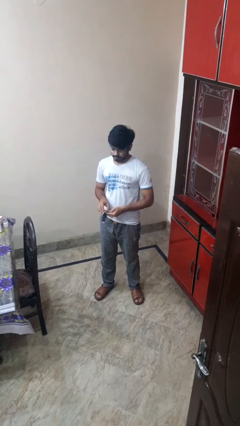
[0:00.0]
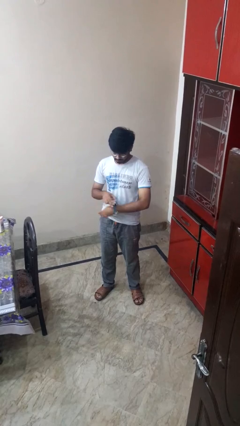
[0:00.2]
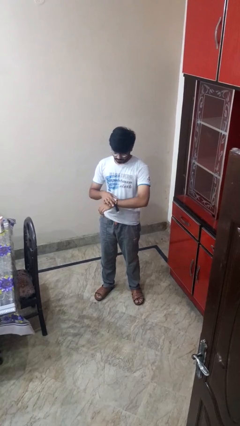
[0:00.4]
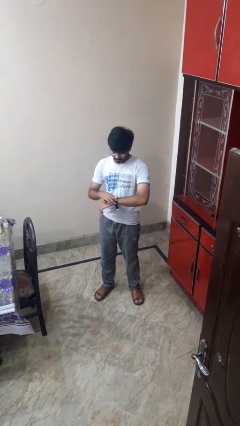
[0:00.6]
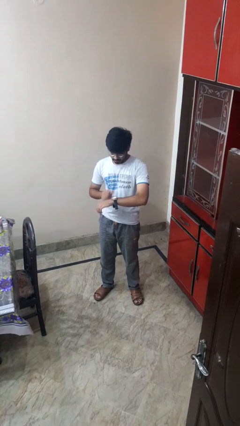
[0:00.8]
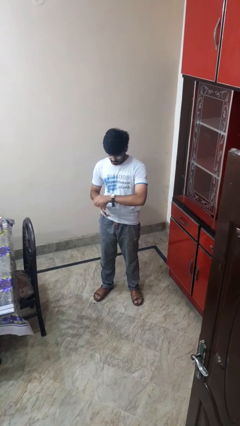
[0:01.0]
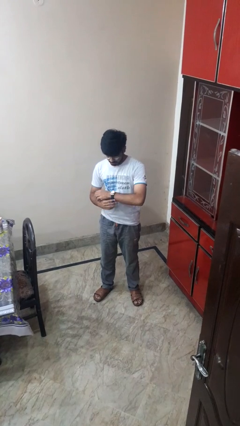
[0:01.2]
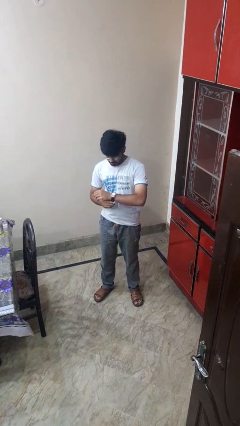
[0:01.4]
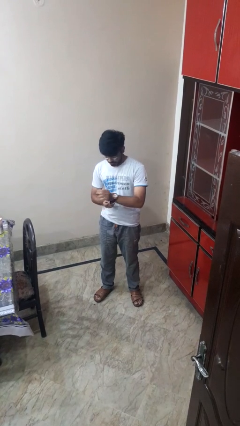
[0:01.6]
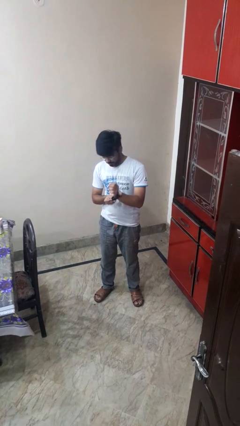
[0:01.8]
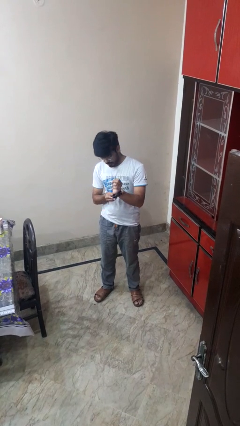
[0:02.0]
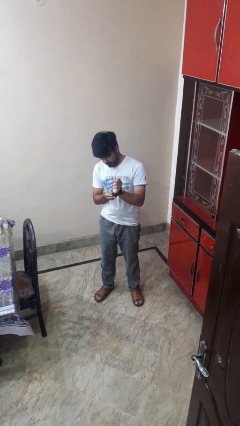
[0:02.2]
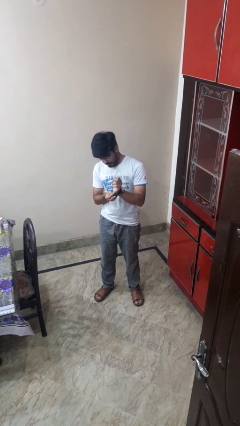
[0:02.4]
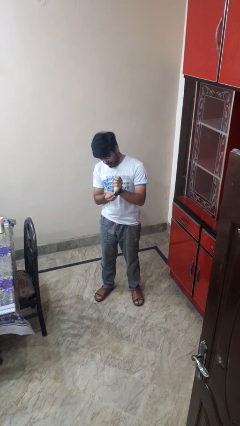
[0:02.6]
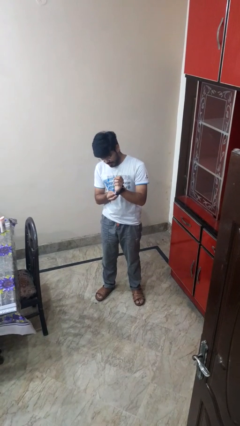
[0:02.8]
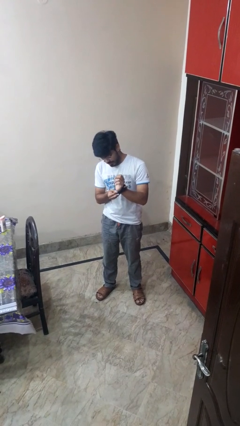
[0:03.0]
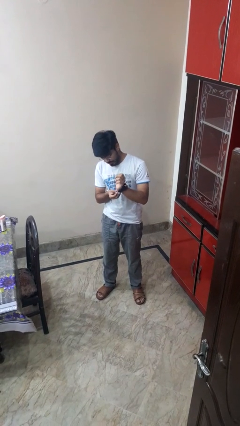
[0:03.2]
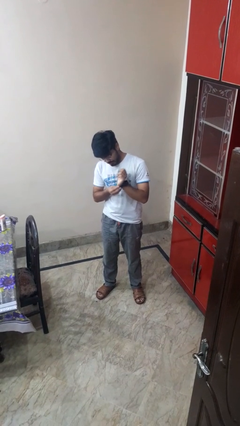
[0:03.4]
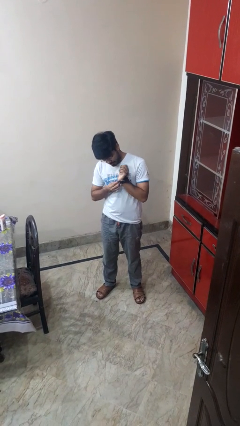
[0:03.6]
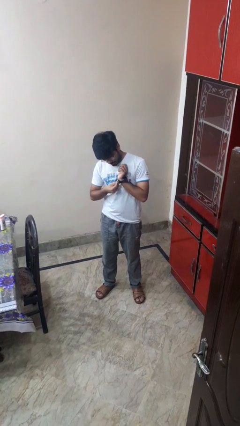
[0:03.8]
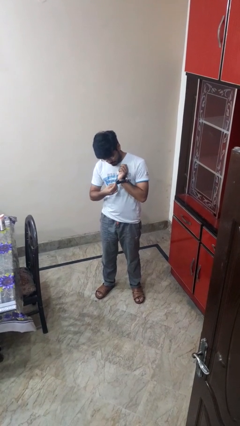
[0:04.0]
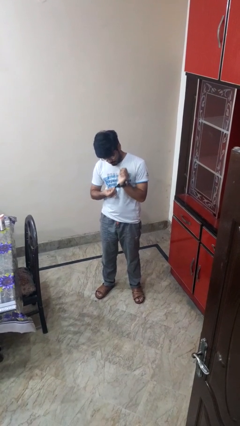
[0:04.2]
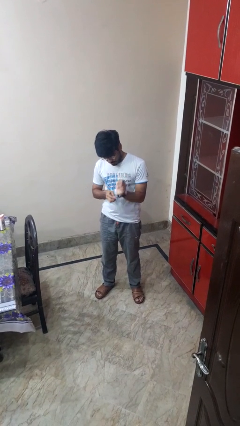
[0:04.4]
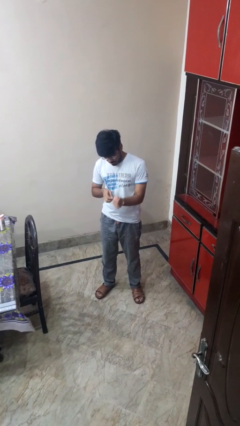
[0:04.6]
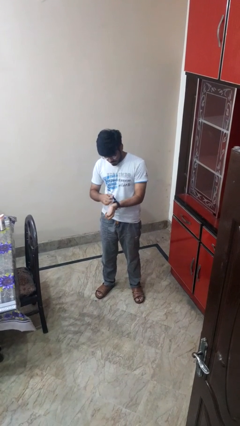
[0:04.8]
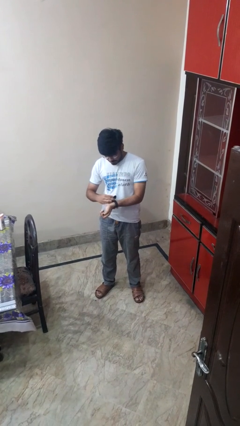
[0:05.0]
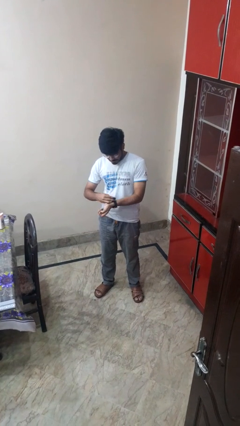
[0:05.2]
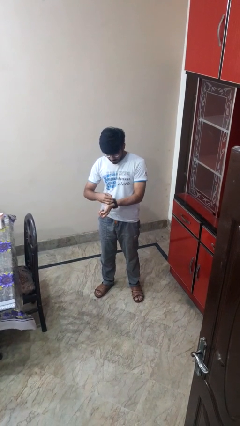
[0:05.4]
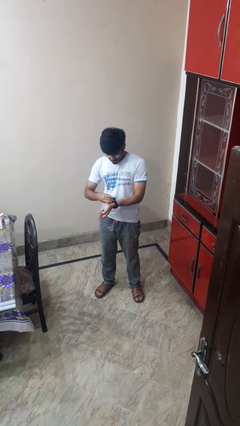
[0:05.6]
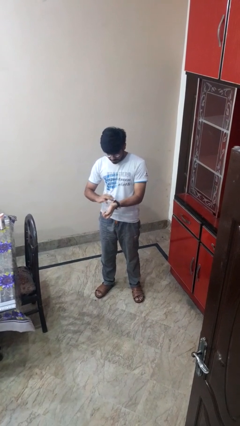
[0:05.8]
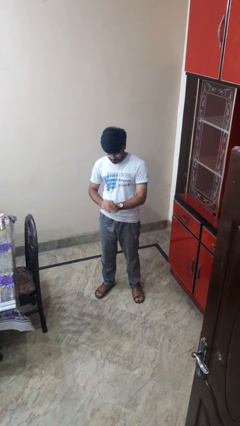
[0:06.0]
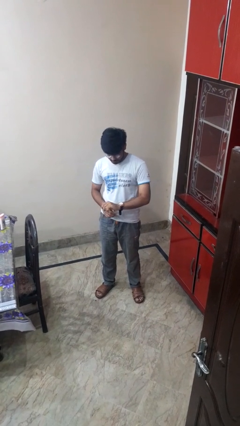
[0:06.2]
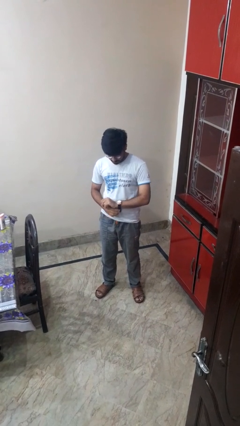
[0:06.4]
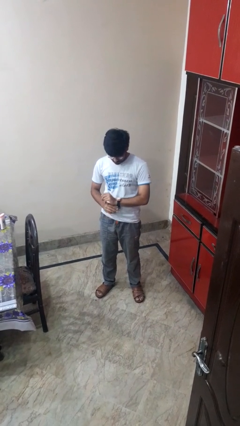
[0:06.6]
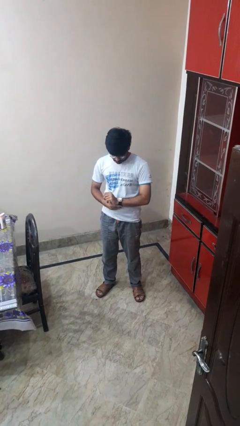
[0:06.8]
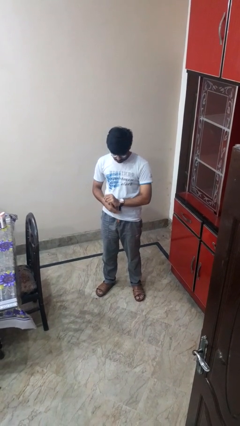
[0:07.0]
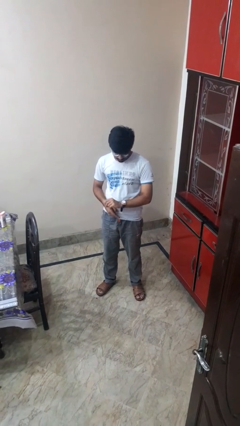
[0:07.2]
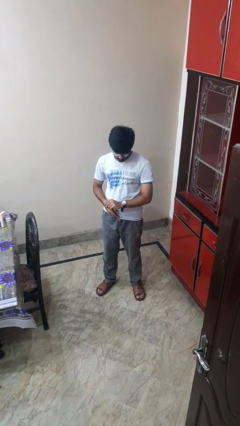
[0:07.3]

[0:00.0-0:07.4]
person puts on wristwatch

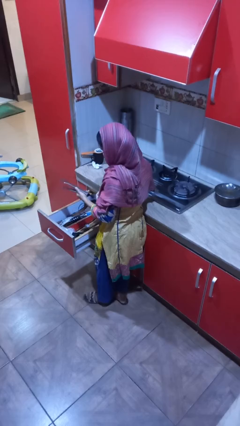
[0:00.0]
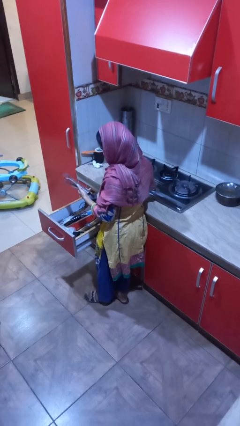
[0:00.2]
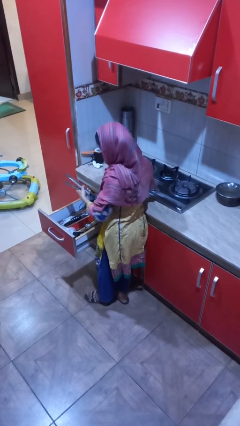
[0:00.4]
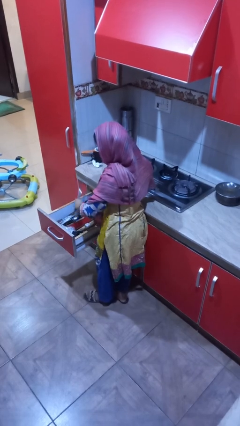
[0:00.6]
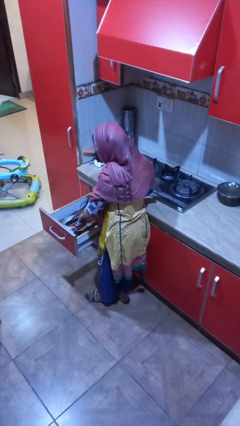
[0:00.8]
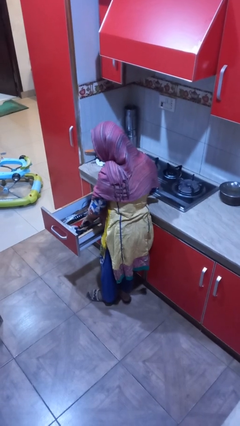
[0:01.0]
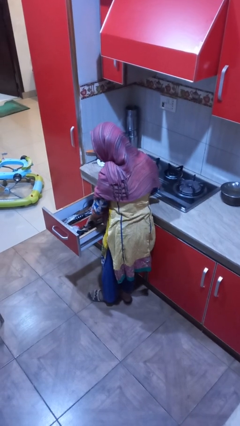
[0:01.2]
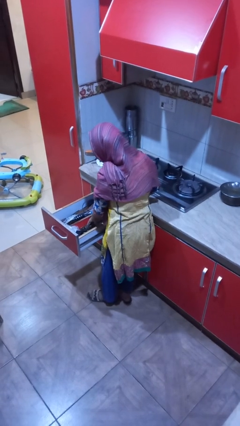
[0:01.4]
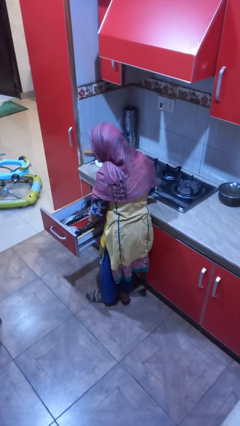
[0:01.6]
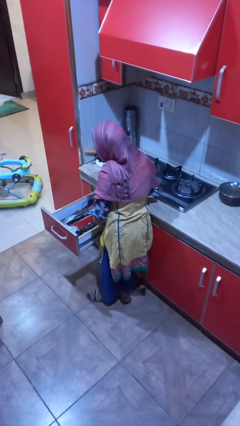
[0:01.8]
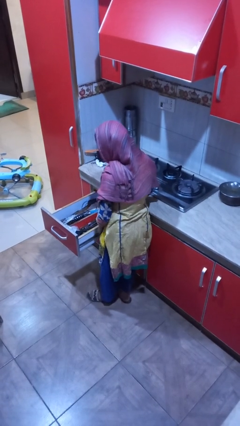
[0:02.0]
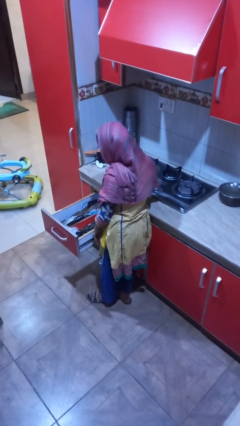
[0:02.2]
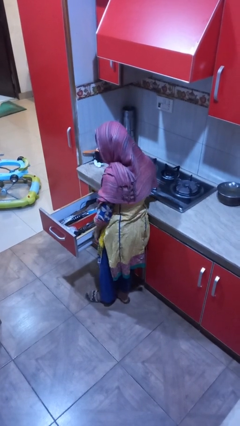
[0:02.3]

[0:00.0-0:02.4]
person puts object into kitchen drawer

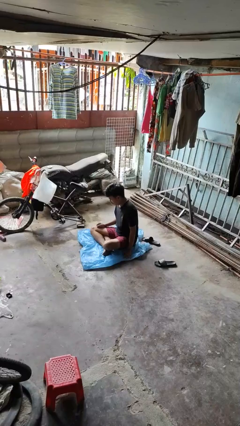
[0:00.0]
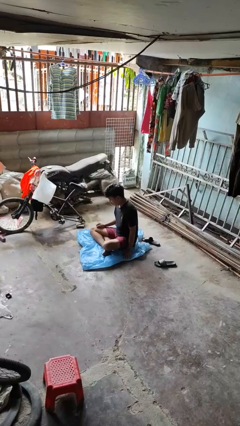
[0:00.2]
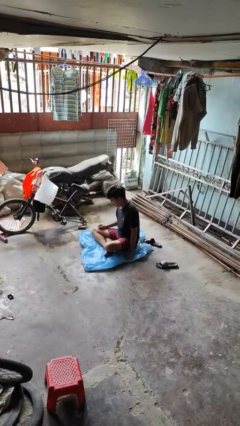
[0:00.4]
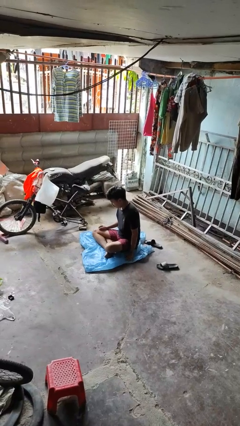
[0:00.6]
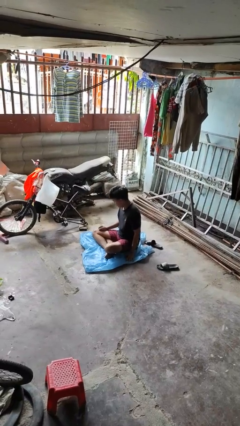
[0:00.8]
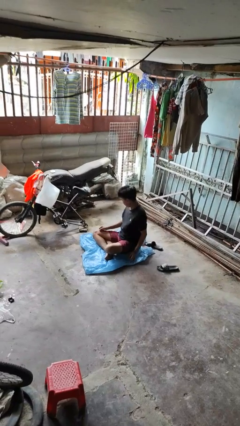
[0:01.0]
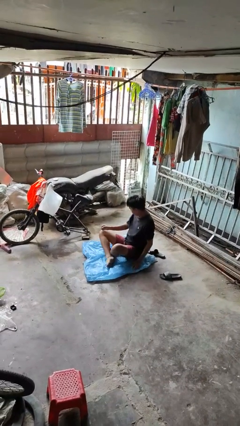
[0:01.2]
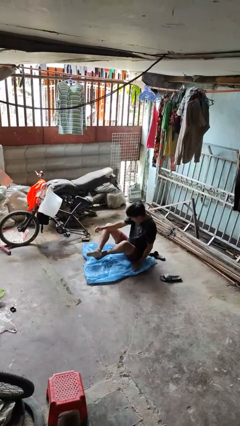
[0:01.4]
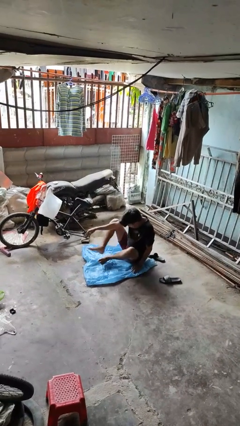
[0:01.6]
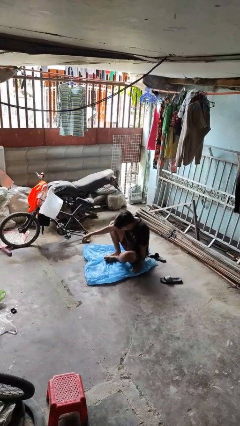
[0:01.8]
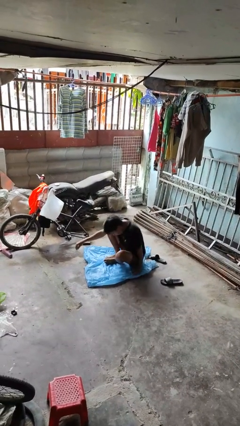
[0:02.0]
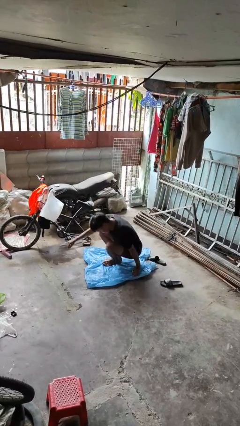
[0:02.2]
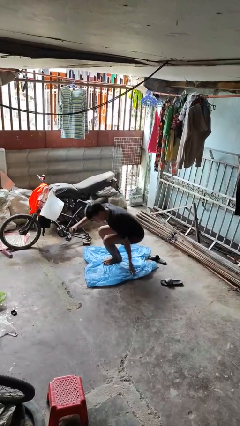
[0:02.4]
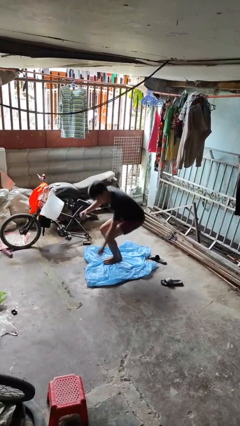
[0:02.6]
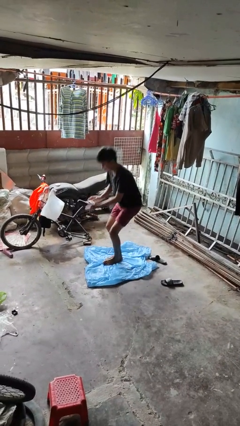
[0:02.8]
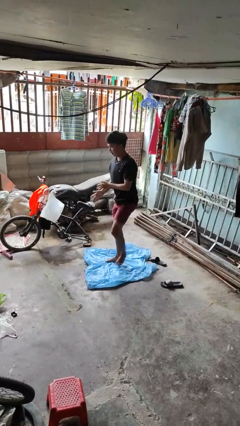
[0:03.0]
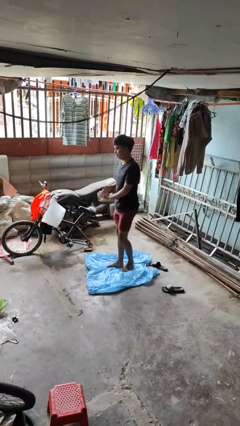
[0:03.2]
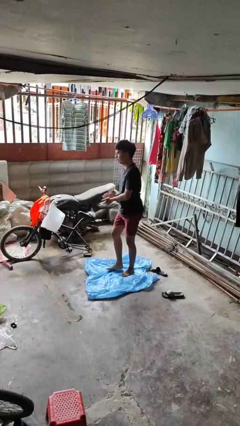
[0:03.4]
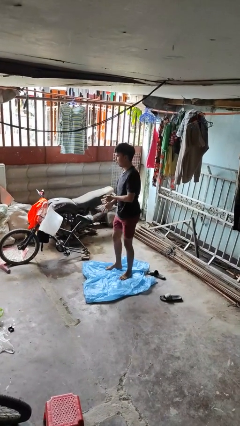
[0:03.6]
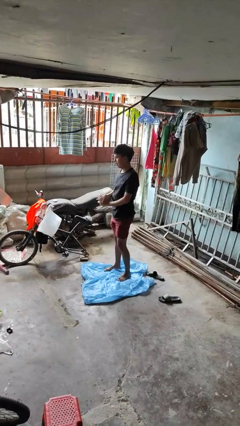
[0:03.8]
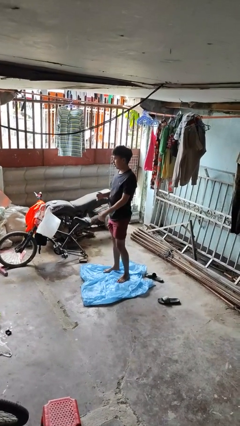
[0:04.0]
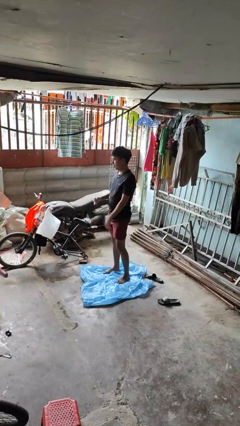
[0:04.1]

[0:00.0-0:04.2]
person stands up from floor

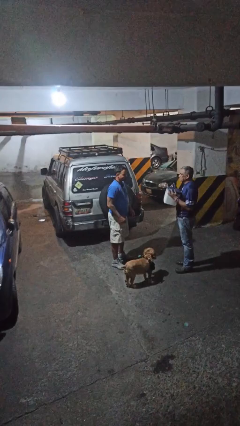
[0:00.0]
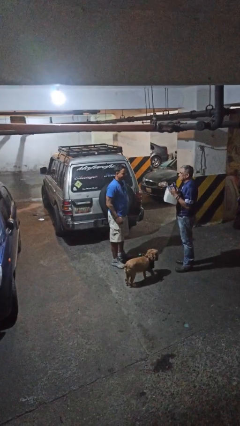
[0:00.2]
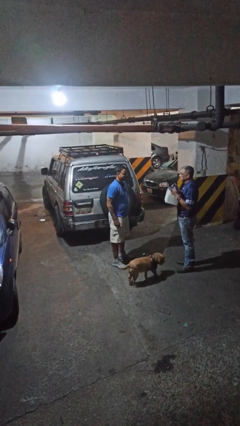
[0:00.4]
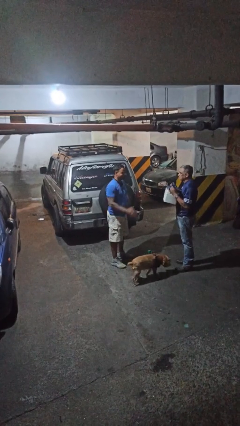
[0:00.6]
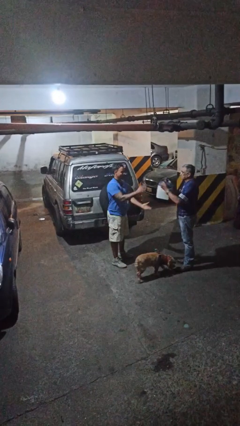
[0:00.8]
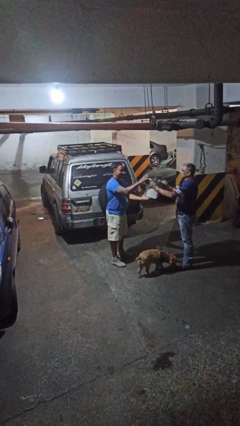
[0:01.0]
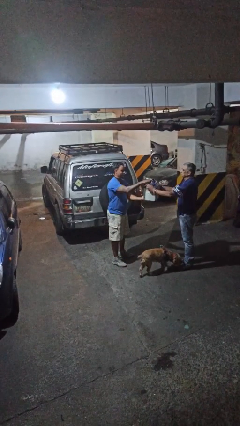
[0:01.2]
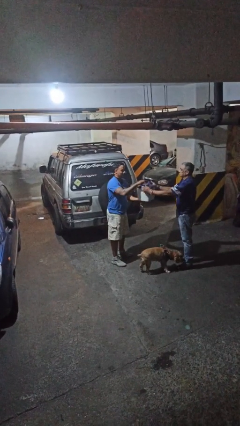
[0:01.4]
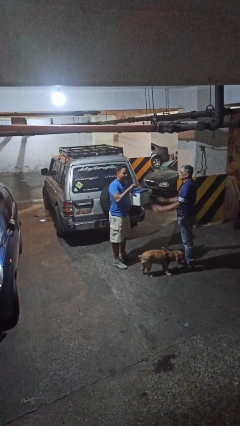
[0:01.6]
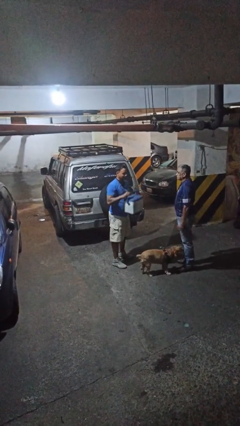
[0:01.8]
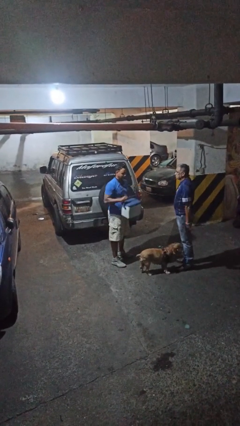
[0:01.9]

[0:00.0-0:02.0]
person transfers object to person

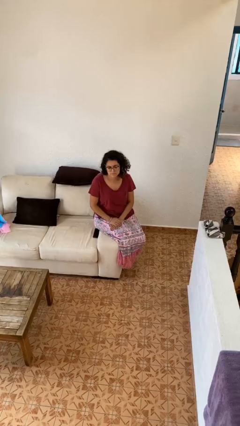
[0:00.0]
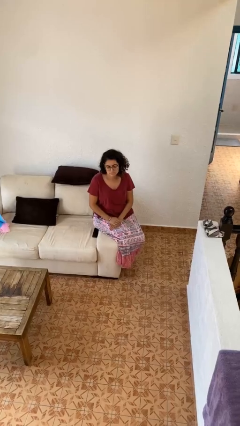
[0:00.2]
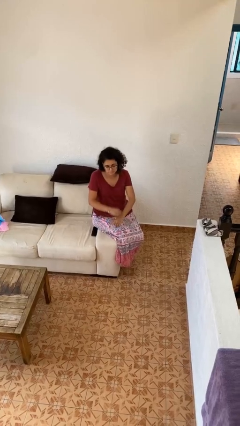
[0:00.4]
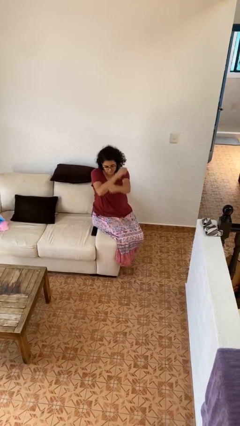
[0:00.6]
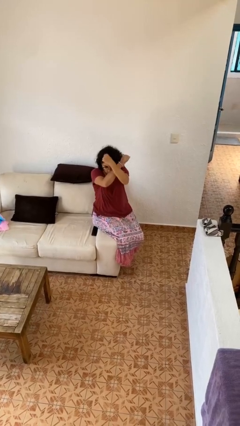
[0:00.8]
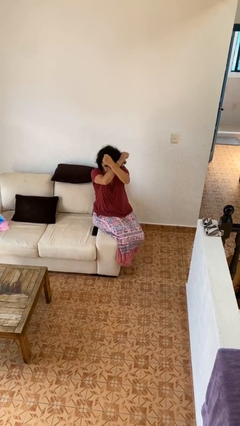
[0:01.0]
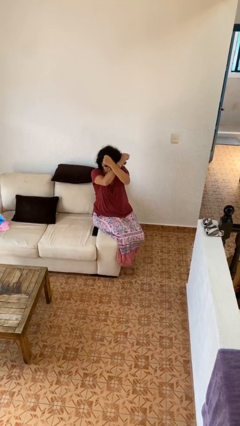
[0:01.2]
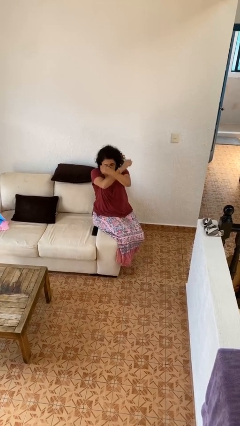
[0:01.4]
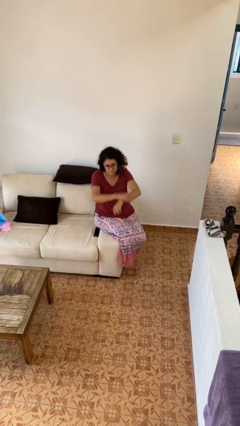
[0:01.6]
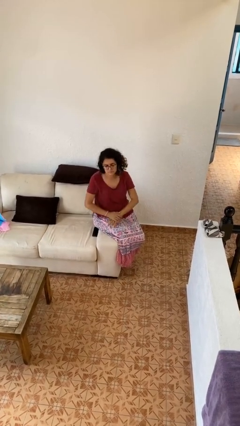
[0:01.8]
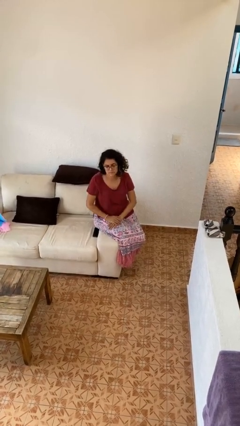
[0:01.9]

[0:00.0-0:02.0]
person gestures arms x
